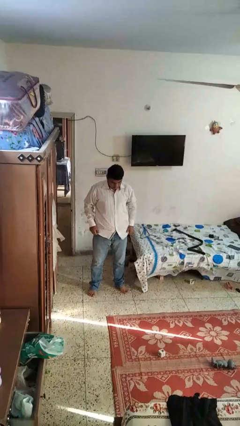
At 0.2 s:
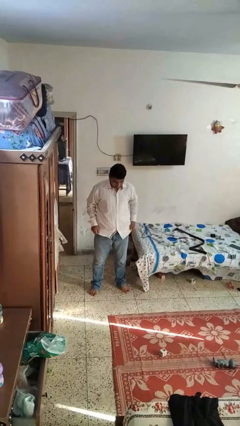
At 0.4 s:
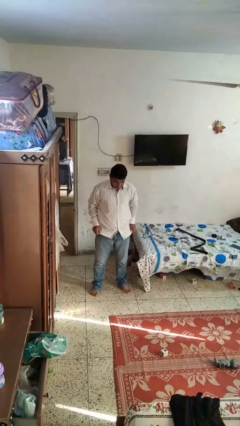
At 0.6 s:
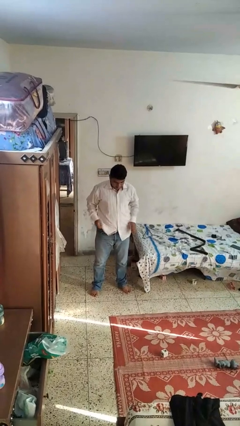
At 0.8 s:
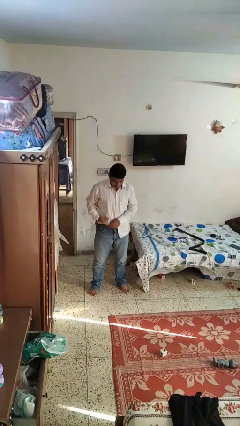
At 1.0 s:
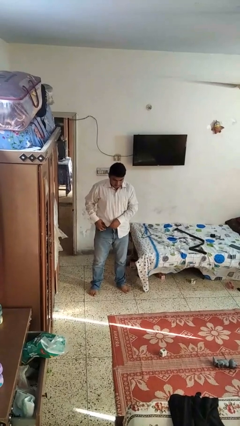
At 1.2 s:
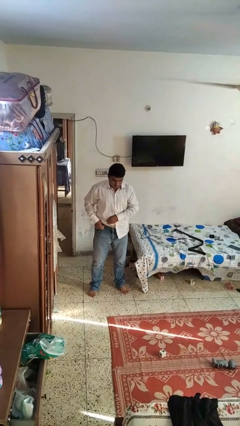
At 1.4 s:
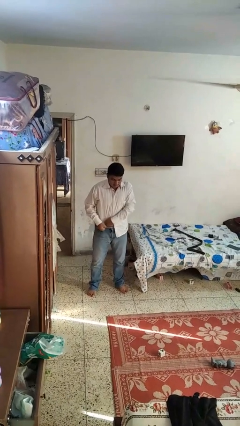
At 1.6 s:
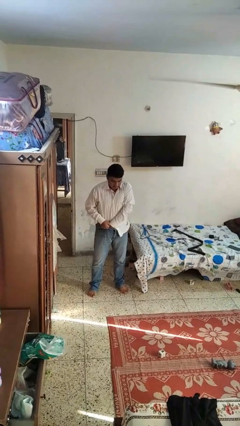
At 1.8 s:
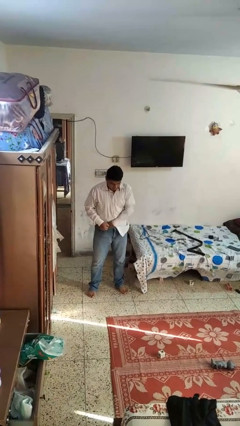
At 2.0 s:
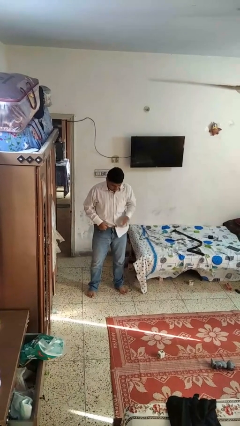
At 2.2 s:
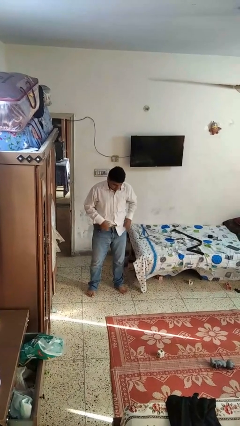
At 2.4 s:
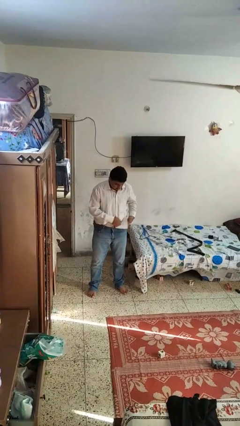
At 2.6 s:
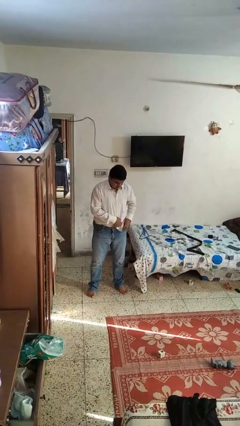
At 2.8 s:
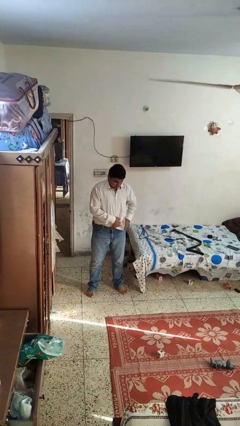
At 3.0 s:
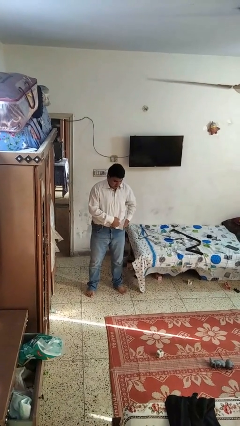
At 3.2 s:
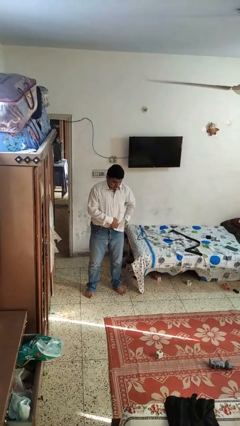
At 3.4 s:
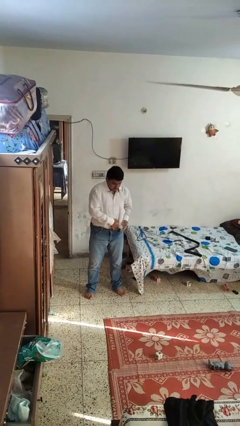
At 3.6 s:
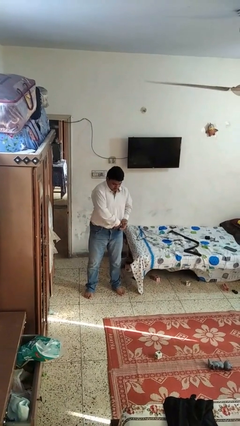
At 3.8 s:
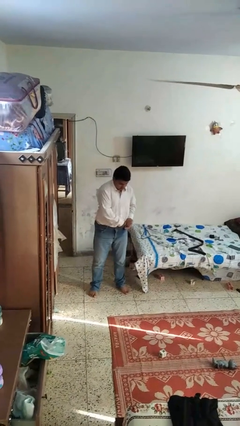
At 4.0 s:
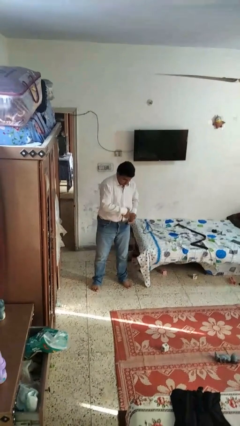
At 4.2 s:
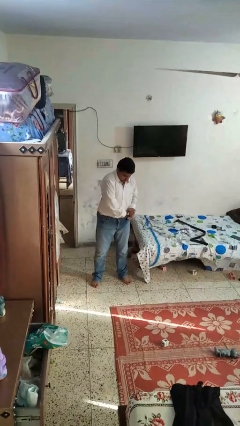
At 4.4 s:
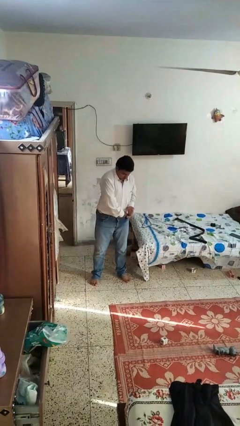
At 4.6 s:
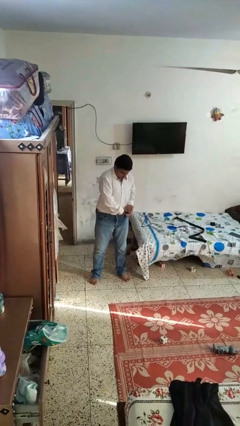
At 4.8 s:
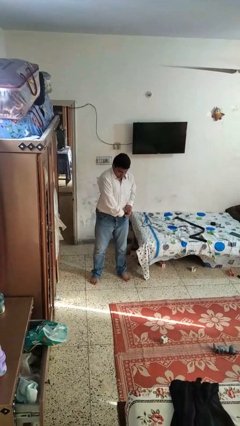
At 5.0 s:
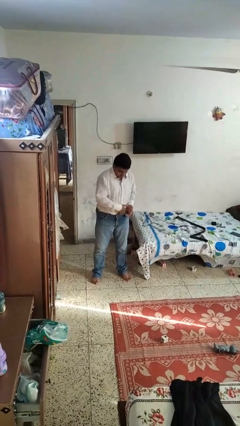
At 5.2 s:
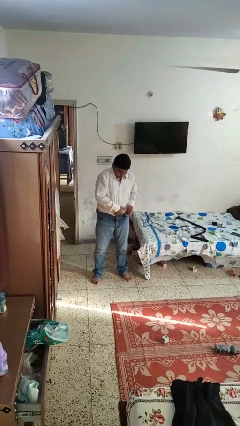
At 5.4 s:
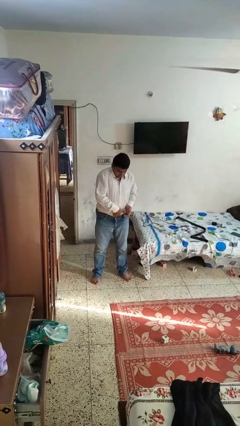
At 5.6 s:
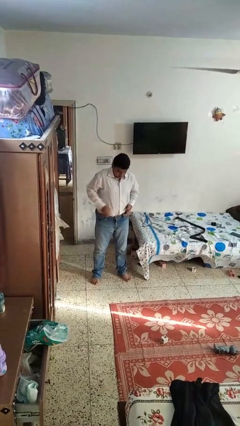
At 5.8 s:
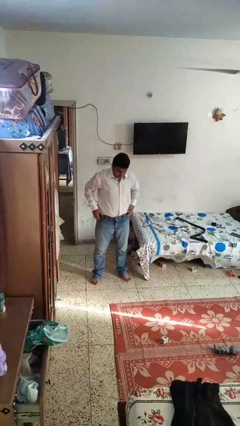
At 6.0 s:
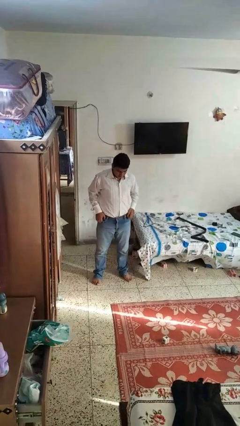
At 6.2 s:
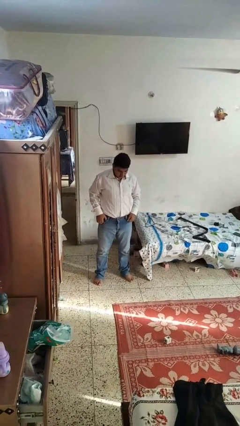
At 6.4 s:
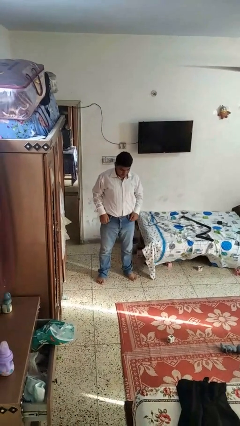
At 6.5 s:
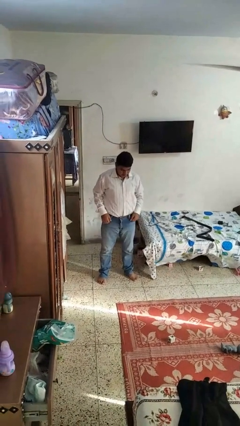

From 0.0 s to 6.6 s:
person tucks in shirt

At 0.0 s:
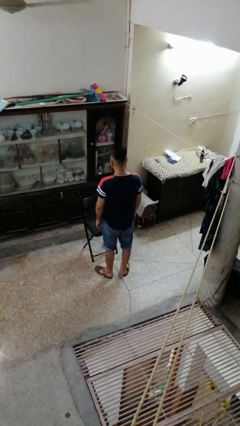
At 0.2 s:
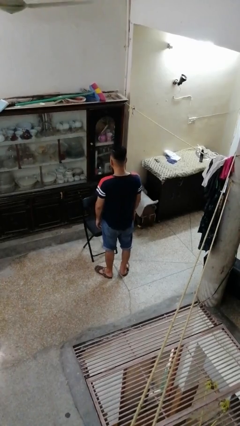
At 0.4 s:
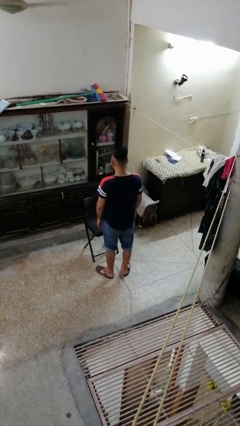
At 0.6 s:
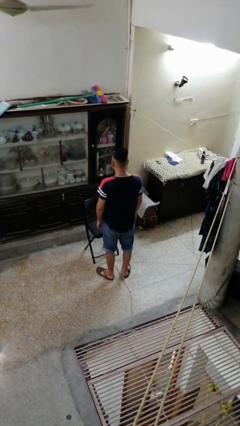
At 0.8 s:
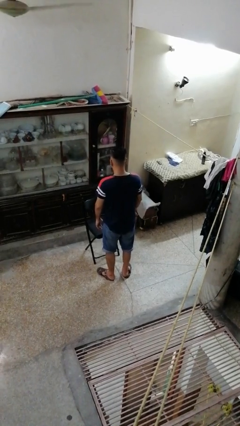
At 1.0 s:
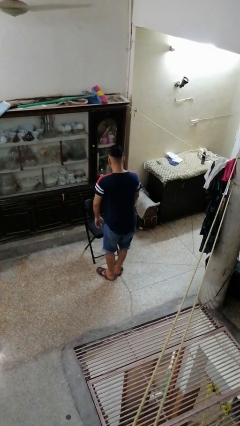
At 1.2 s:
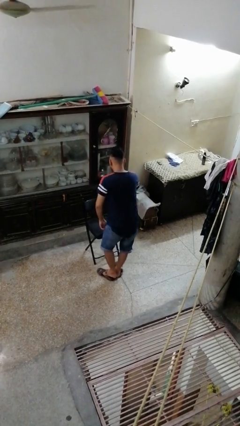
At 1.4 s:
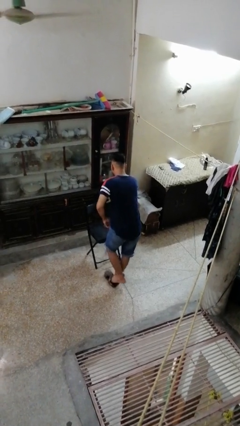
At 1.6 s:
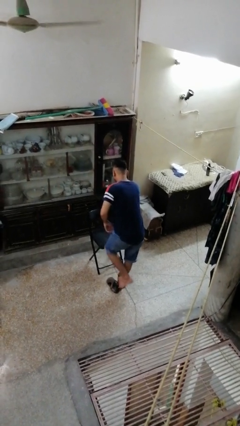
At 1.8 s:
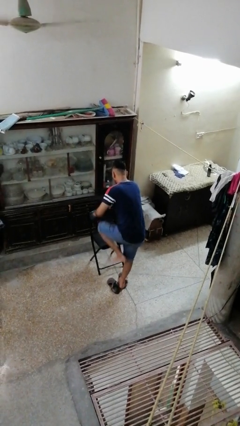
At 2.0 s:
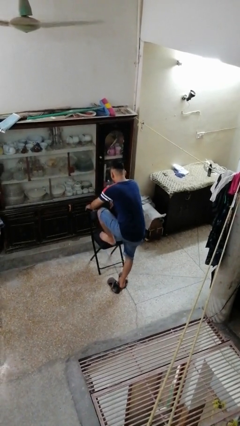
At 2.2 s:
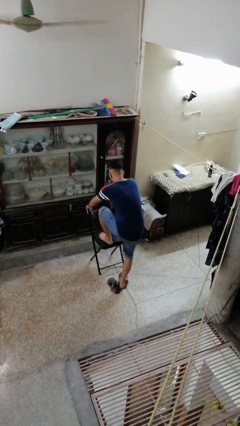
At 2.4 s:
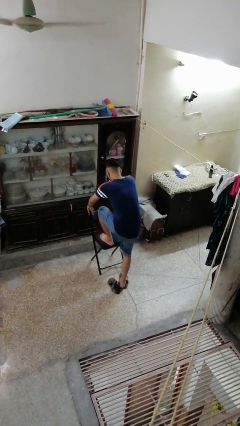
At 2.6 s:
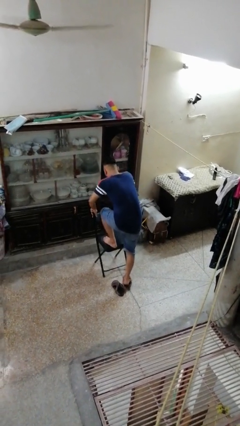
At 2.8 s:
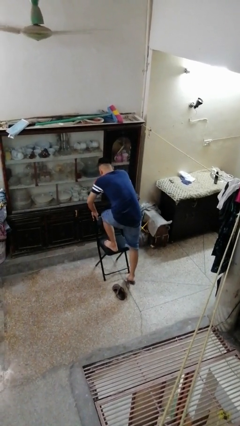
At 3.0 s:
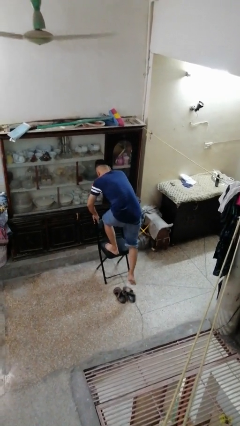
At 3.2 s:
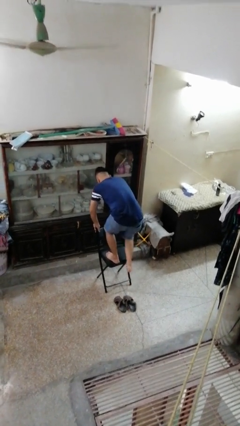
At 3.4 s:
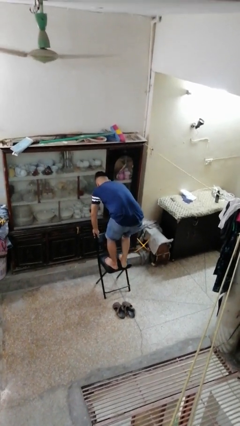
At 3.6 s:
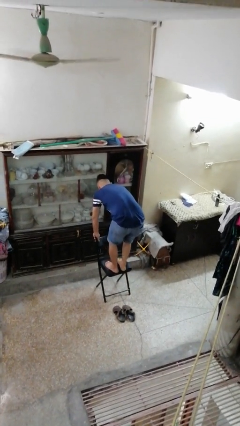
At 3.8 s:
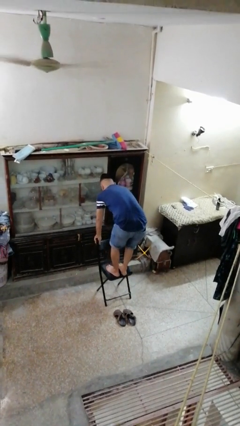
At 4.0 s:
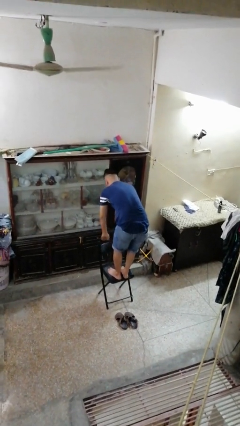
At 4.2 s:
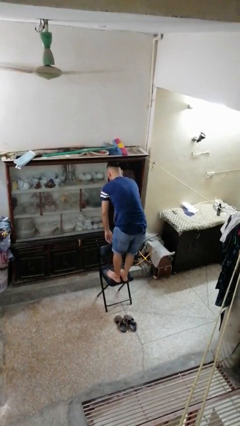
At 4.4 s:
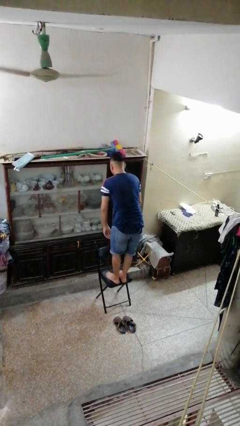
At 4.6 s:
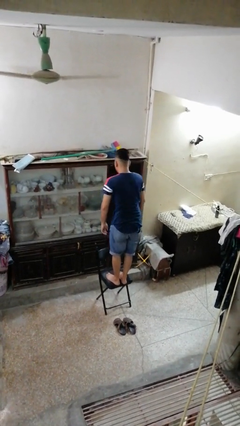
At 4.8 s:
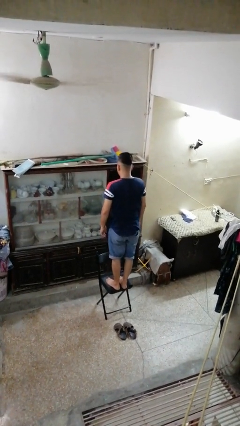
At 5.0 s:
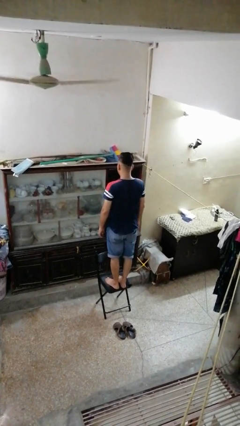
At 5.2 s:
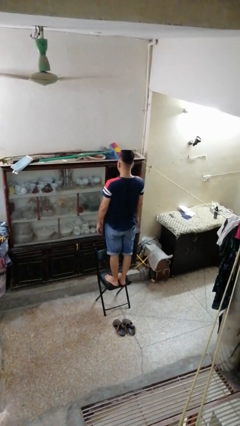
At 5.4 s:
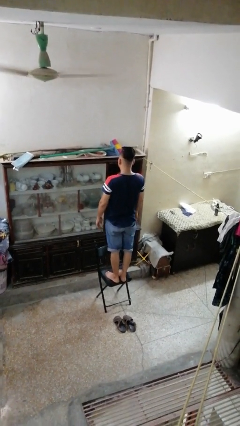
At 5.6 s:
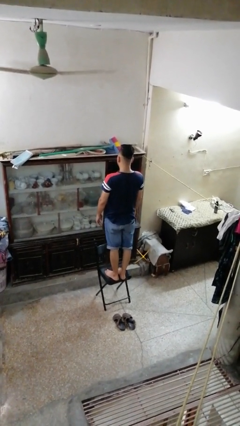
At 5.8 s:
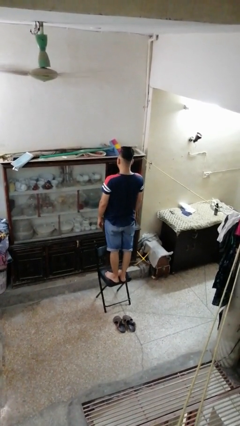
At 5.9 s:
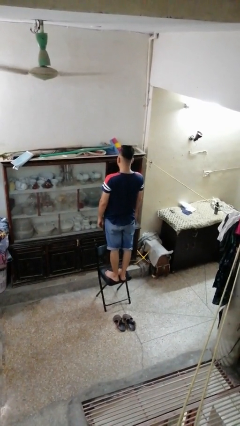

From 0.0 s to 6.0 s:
person climbs on chair

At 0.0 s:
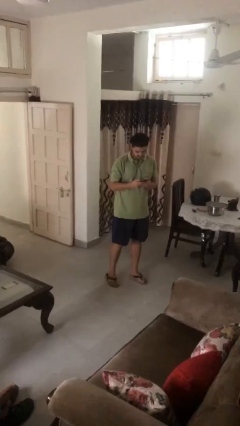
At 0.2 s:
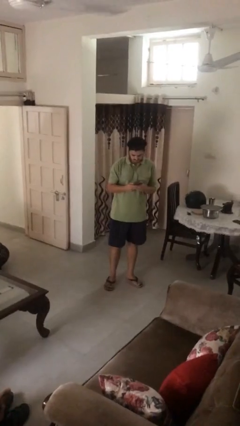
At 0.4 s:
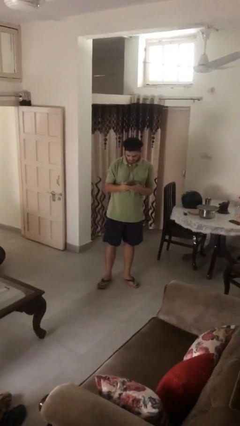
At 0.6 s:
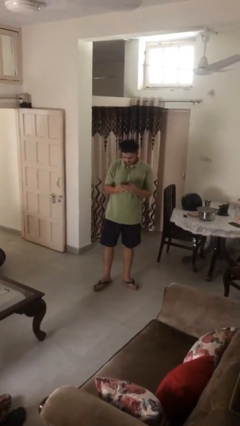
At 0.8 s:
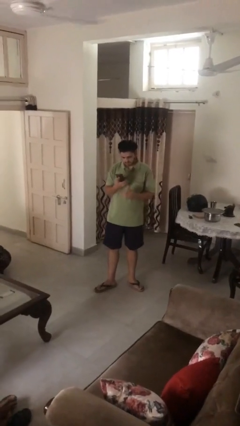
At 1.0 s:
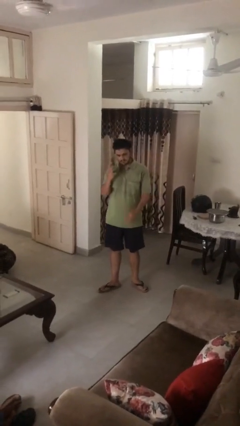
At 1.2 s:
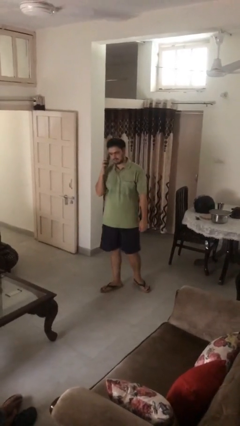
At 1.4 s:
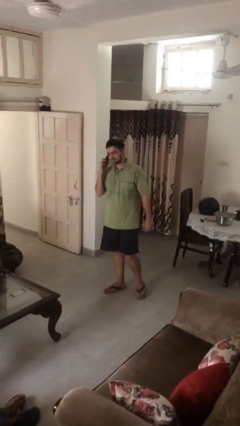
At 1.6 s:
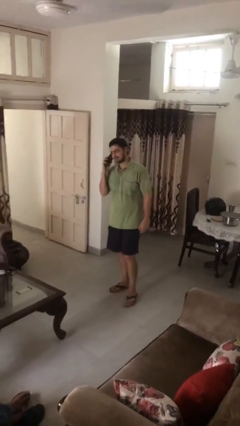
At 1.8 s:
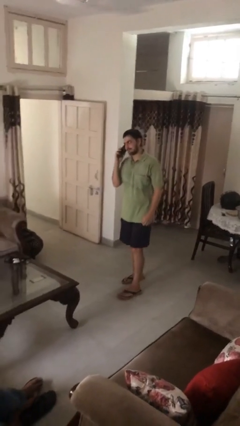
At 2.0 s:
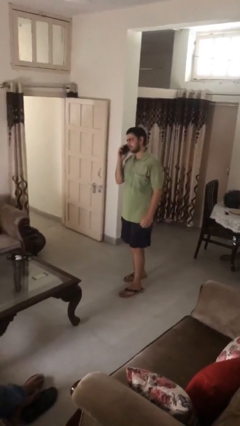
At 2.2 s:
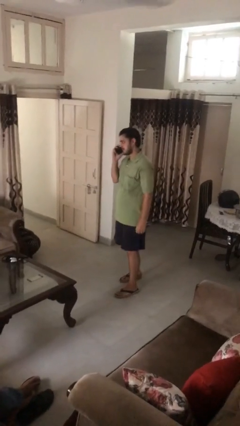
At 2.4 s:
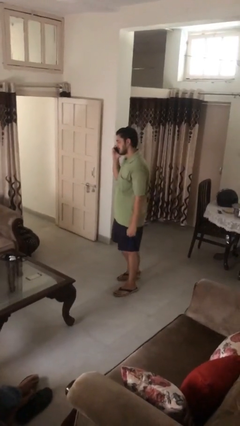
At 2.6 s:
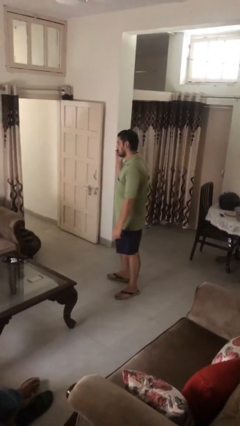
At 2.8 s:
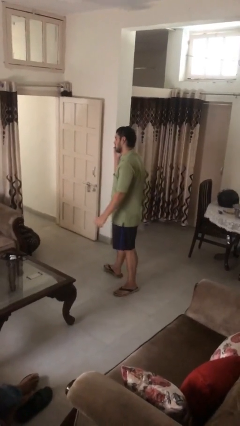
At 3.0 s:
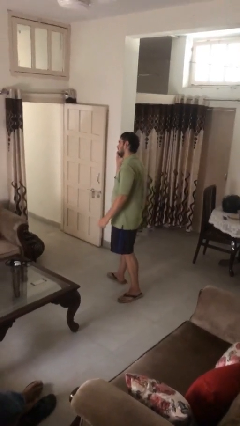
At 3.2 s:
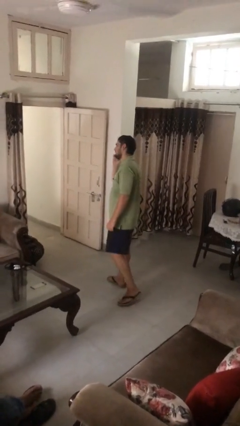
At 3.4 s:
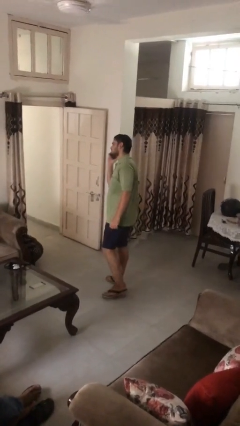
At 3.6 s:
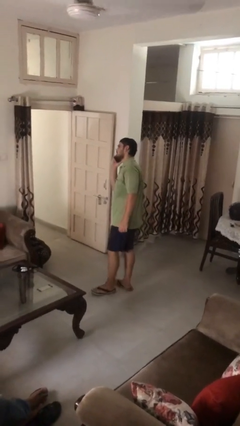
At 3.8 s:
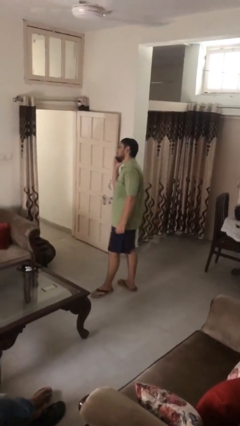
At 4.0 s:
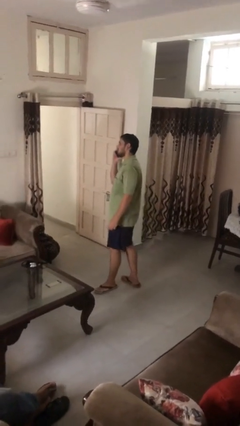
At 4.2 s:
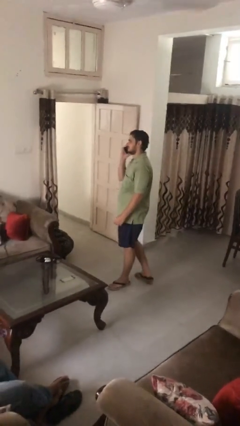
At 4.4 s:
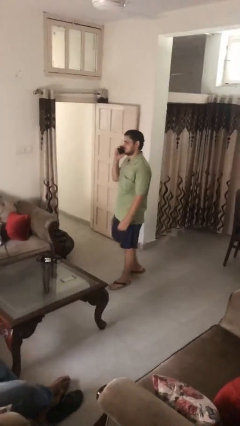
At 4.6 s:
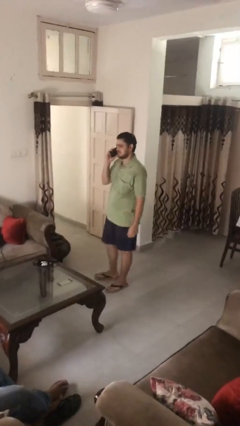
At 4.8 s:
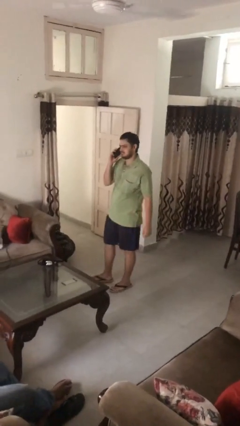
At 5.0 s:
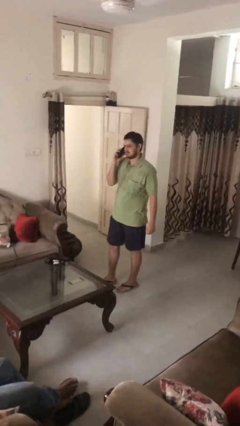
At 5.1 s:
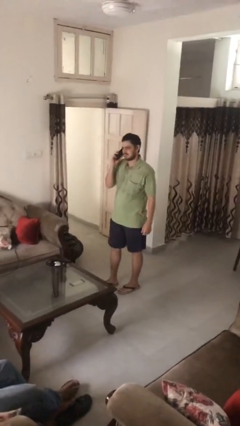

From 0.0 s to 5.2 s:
person talks on phone
